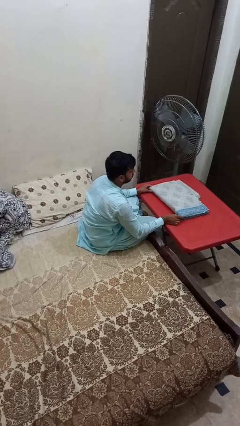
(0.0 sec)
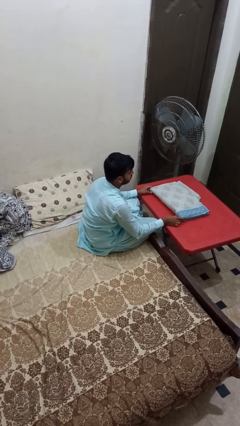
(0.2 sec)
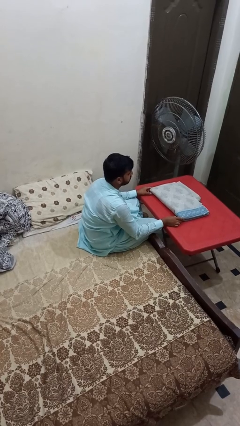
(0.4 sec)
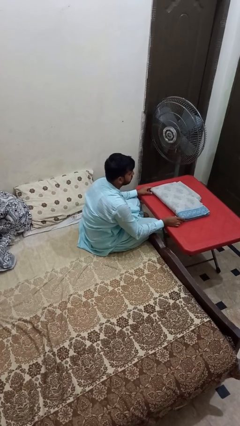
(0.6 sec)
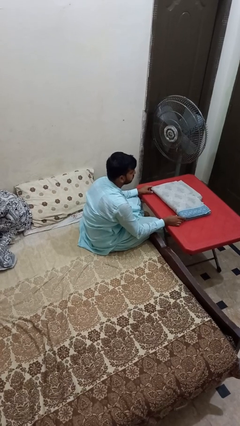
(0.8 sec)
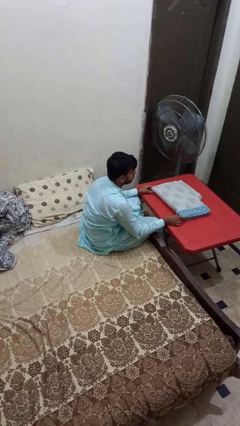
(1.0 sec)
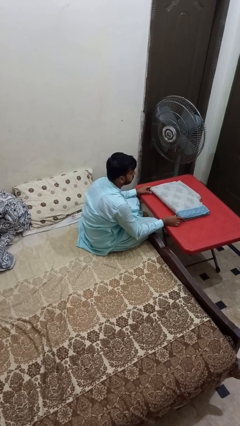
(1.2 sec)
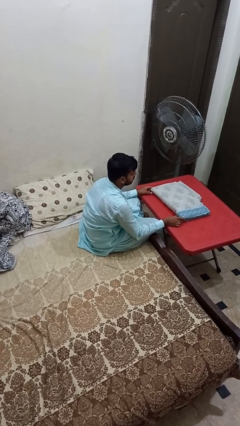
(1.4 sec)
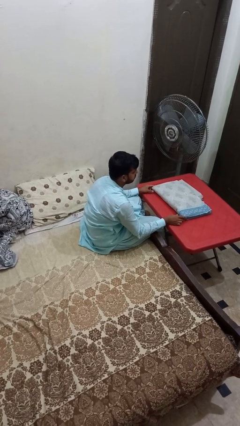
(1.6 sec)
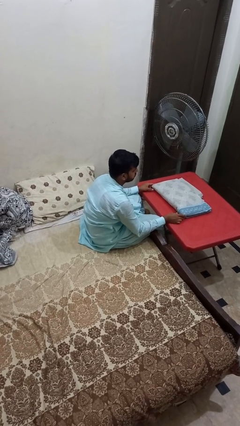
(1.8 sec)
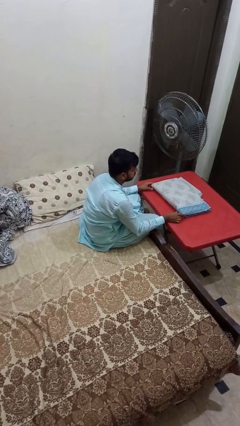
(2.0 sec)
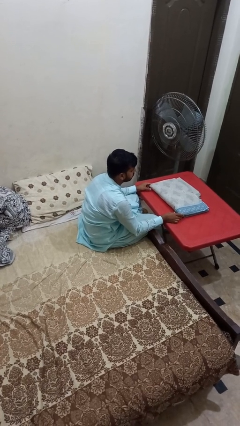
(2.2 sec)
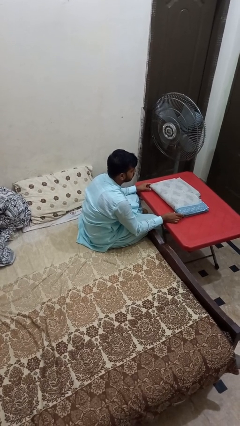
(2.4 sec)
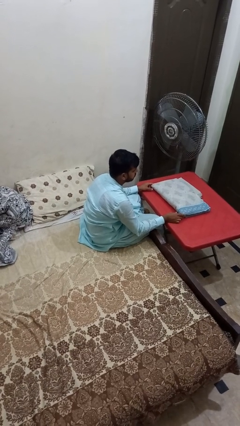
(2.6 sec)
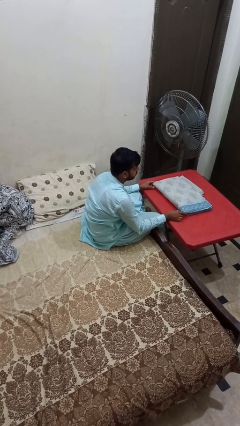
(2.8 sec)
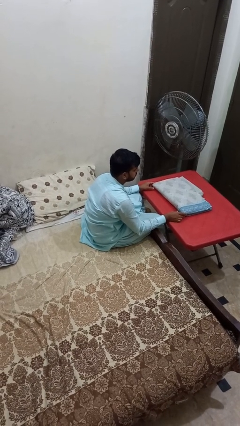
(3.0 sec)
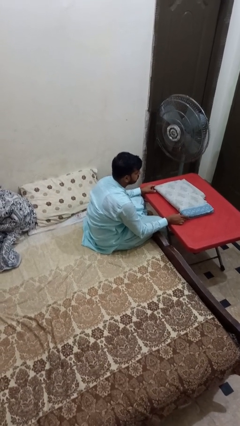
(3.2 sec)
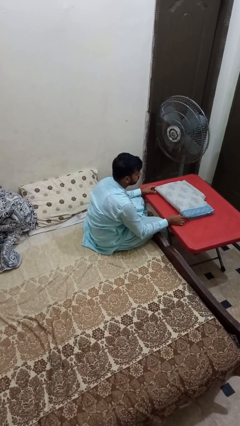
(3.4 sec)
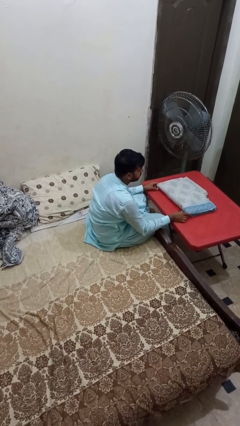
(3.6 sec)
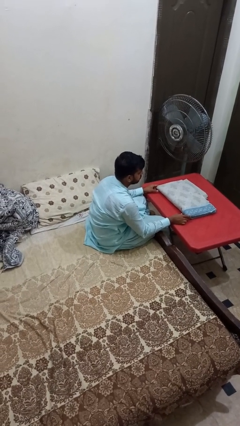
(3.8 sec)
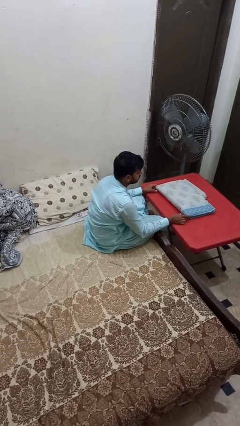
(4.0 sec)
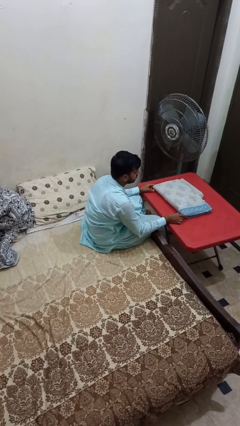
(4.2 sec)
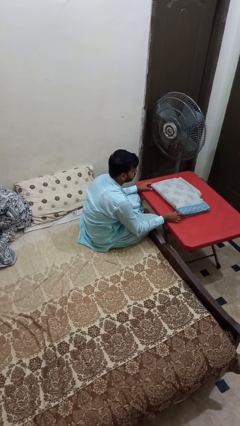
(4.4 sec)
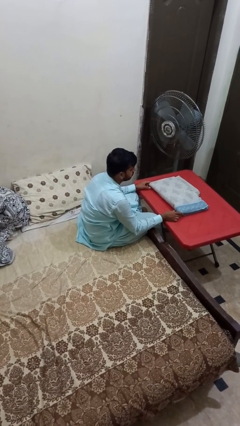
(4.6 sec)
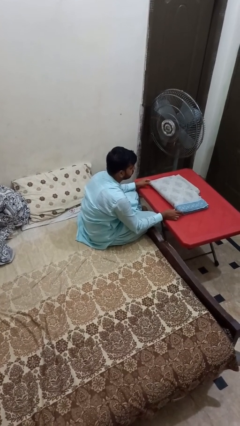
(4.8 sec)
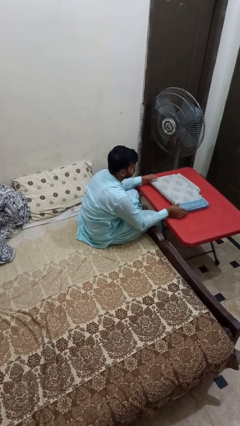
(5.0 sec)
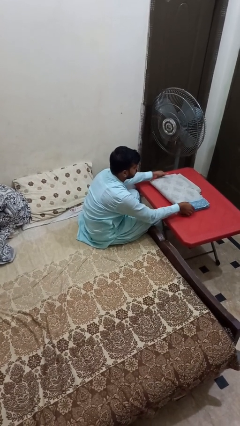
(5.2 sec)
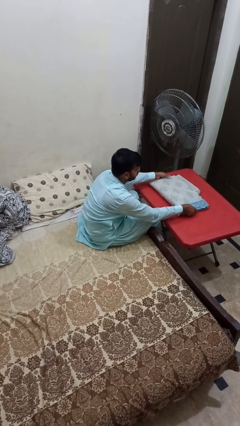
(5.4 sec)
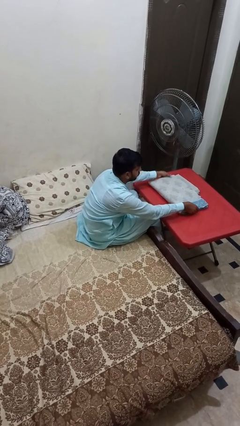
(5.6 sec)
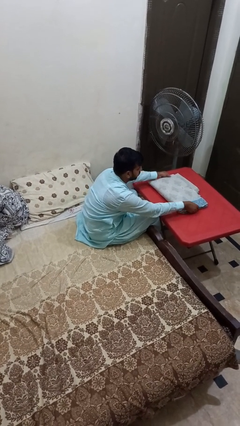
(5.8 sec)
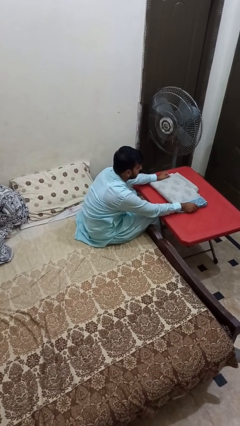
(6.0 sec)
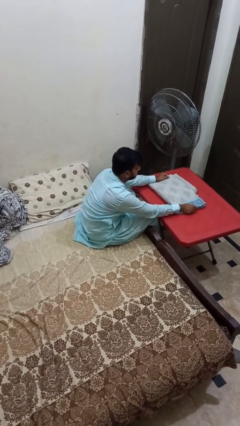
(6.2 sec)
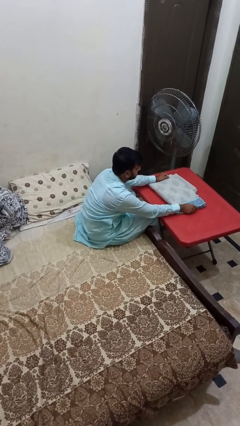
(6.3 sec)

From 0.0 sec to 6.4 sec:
person interacts with tablet

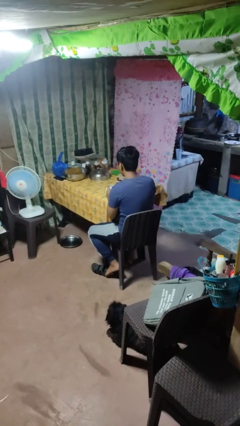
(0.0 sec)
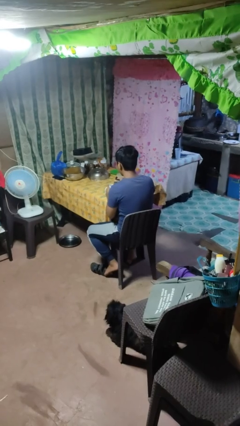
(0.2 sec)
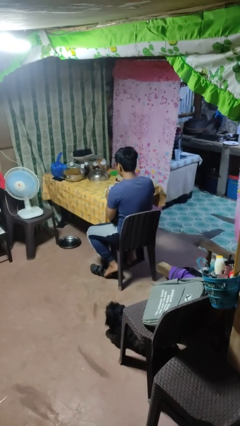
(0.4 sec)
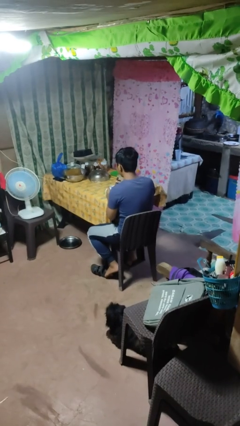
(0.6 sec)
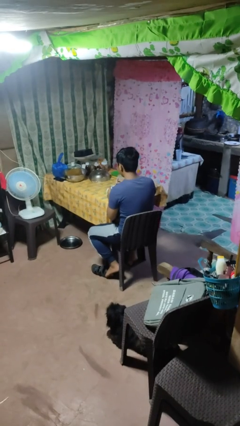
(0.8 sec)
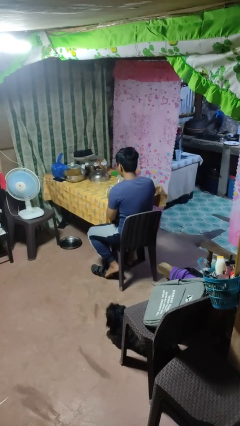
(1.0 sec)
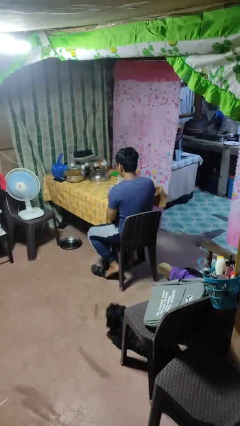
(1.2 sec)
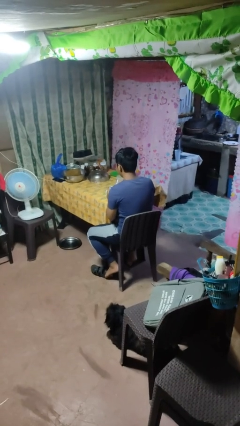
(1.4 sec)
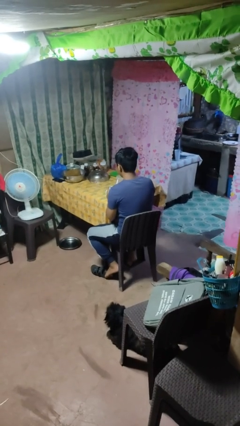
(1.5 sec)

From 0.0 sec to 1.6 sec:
person stirs mug

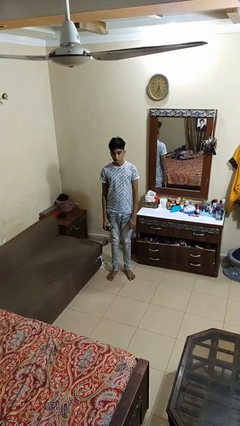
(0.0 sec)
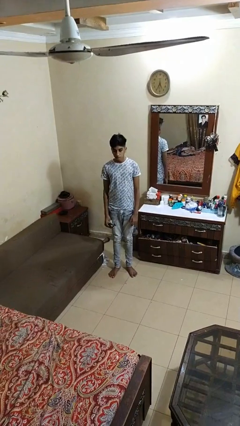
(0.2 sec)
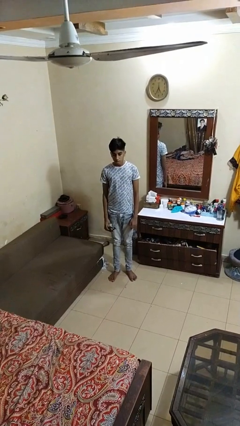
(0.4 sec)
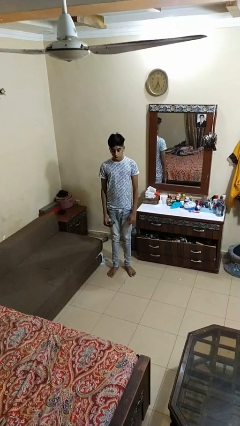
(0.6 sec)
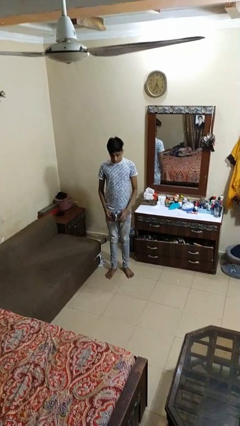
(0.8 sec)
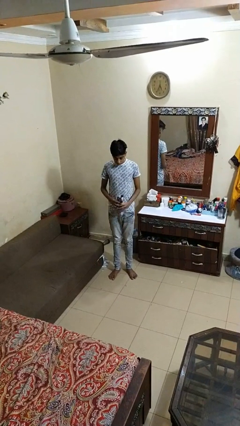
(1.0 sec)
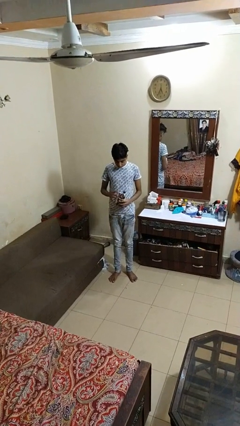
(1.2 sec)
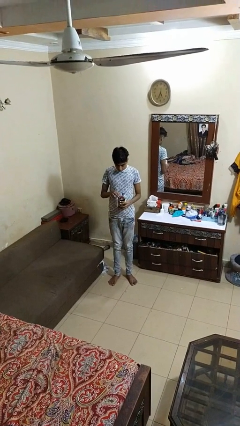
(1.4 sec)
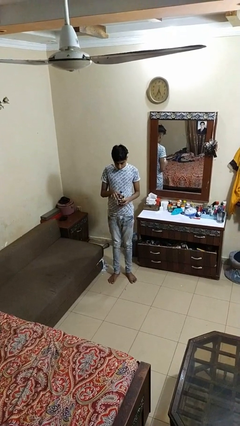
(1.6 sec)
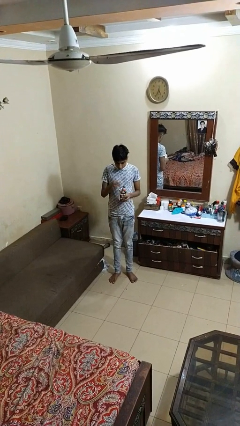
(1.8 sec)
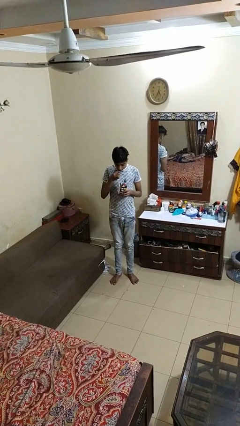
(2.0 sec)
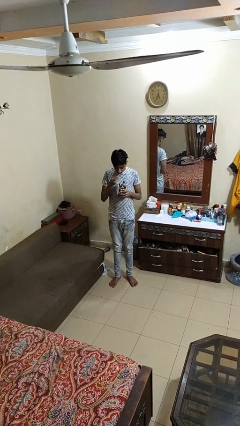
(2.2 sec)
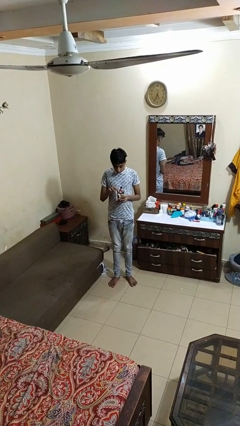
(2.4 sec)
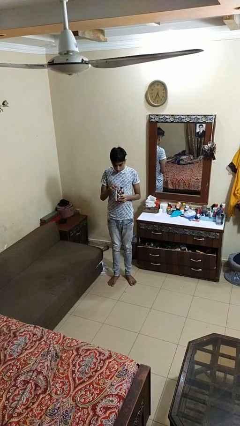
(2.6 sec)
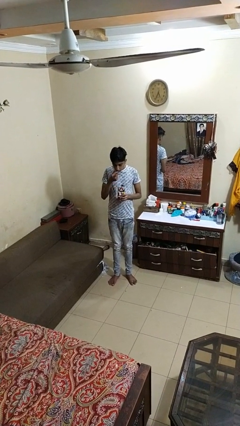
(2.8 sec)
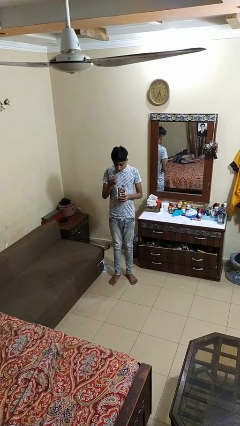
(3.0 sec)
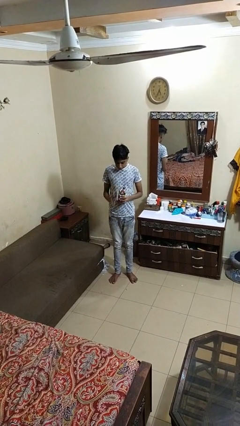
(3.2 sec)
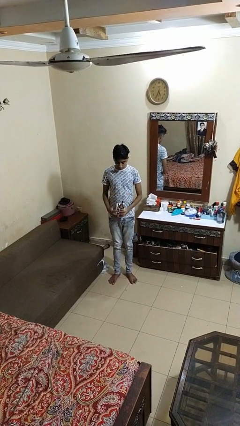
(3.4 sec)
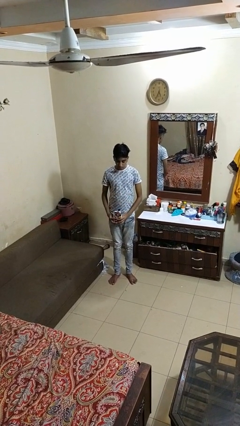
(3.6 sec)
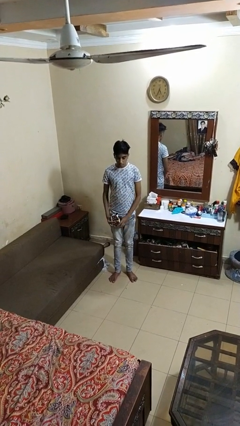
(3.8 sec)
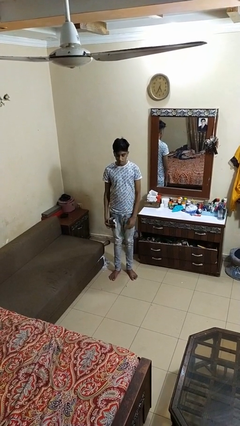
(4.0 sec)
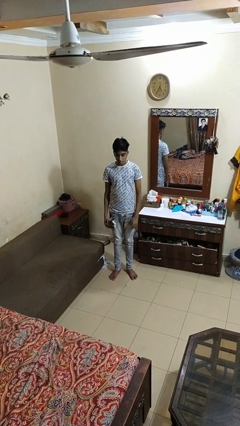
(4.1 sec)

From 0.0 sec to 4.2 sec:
person eats snack from bag

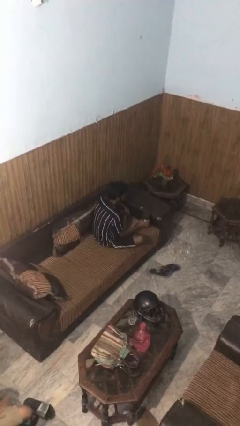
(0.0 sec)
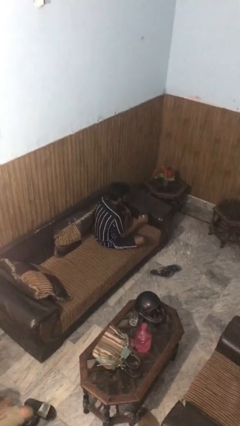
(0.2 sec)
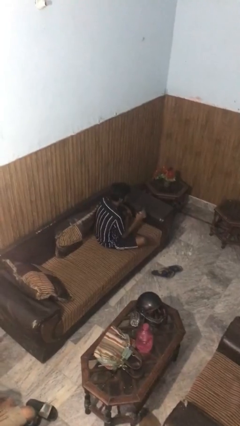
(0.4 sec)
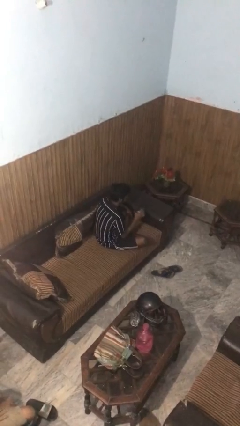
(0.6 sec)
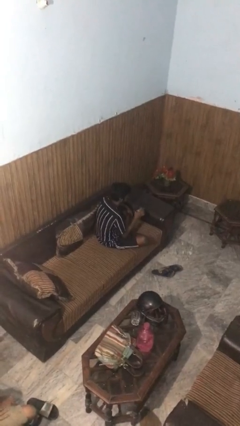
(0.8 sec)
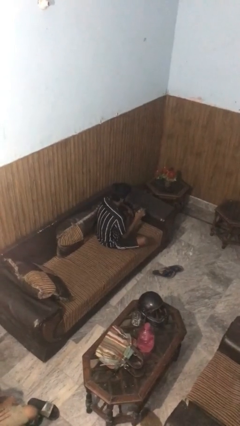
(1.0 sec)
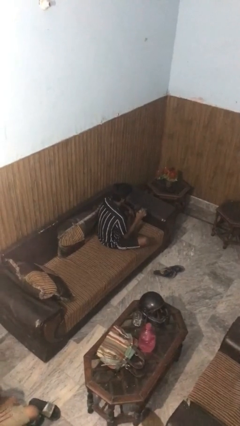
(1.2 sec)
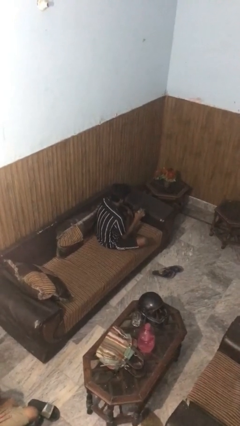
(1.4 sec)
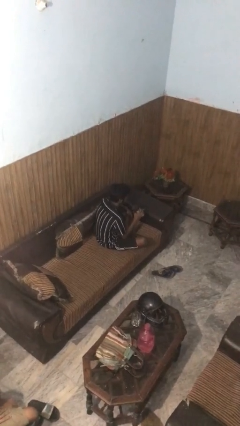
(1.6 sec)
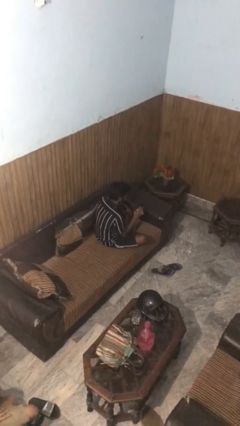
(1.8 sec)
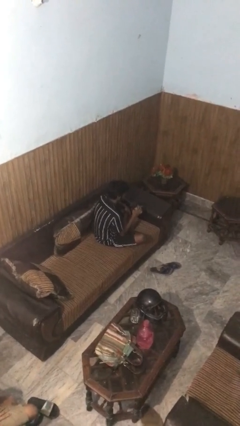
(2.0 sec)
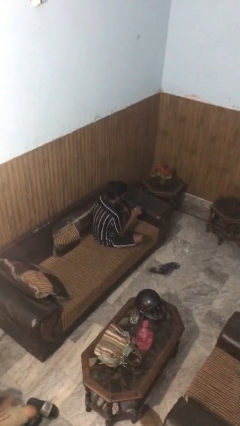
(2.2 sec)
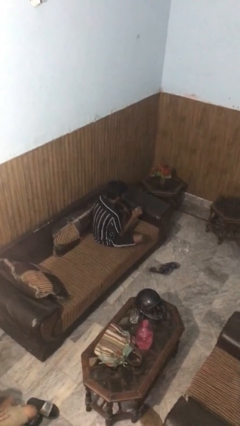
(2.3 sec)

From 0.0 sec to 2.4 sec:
person drinks from straw

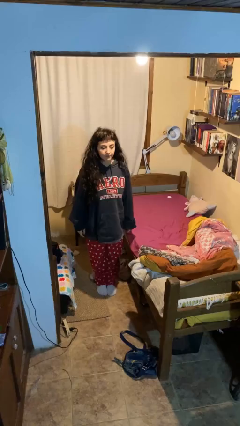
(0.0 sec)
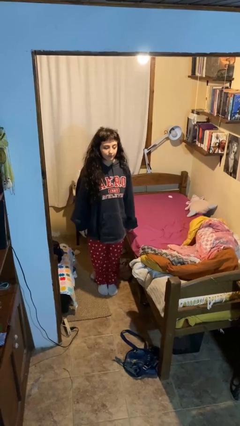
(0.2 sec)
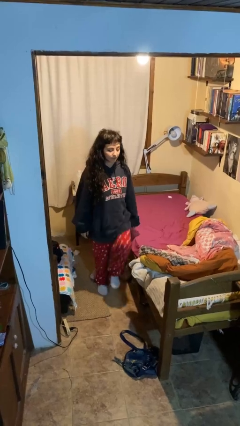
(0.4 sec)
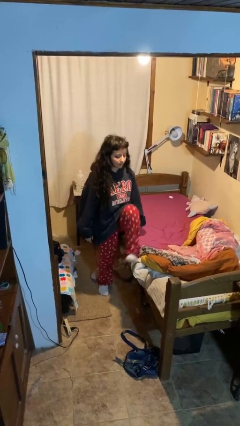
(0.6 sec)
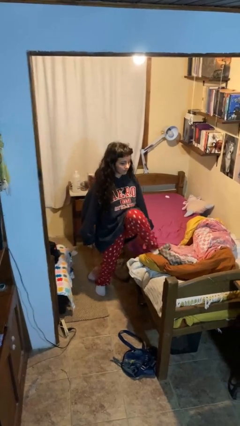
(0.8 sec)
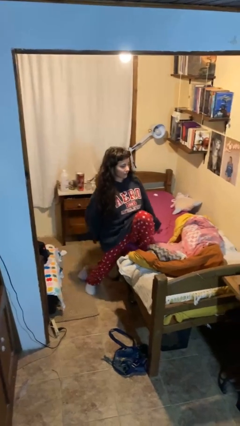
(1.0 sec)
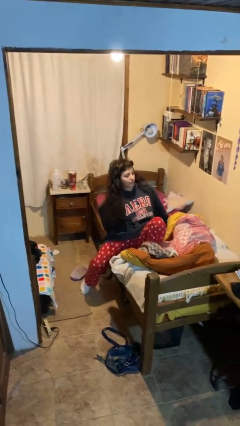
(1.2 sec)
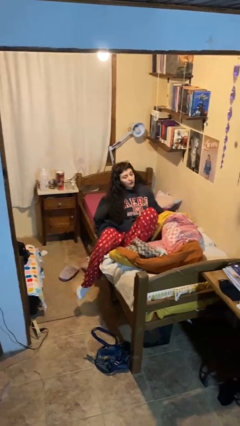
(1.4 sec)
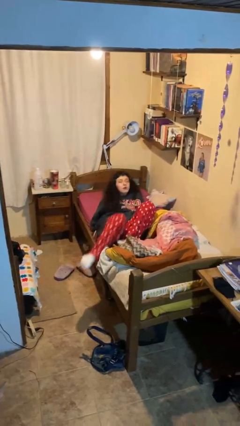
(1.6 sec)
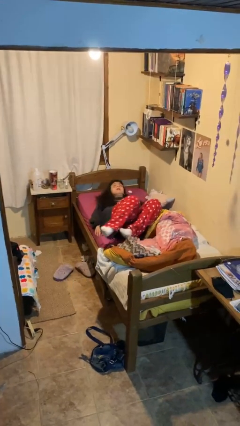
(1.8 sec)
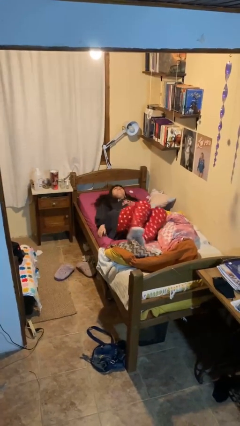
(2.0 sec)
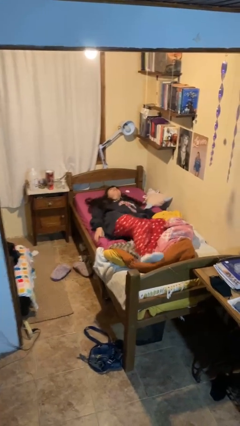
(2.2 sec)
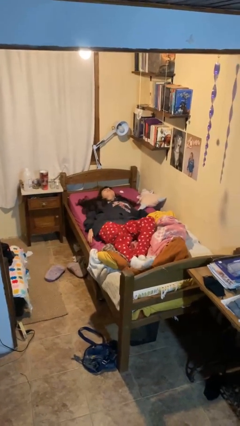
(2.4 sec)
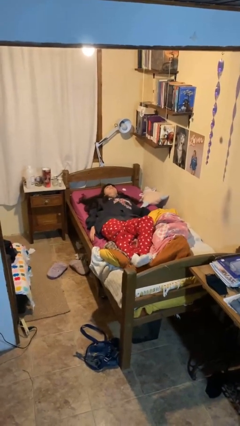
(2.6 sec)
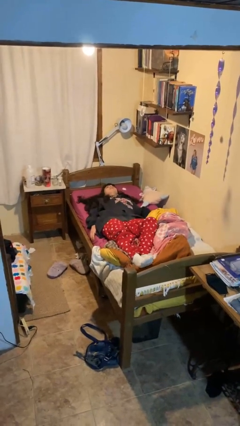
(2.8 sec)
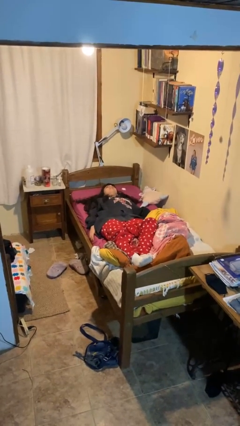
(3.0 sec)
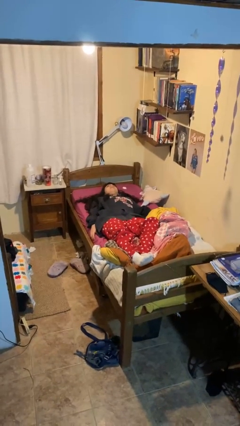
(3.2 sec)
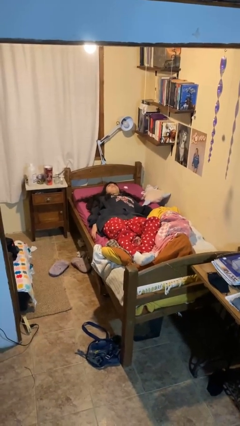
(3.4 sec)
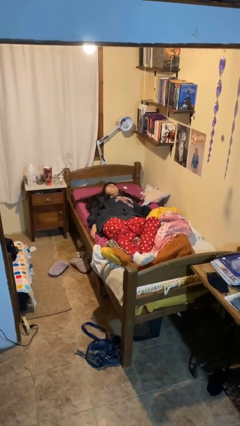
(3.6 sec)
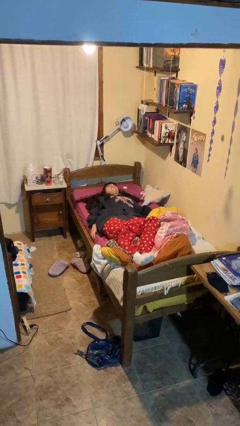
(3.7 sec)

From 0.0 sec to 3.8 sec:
person lies down on bed
